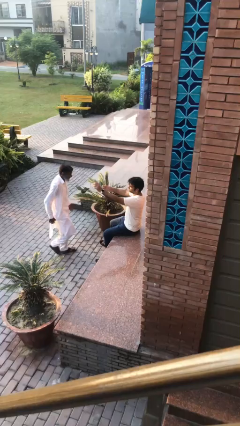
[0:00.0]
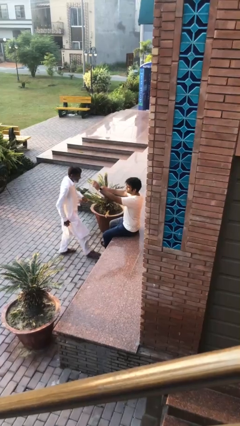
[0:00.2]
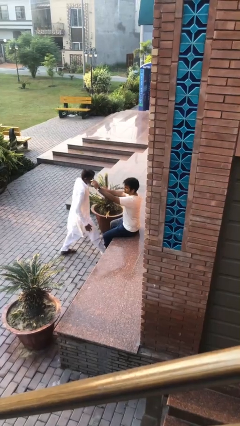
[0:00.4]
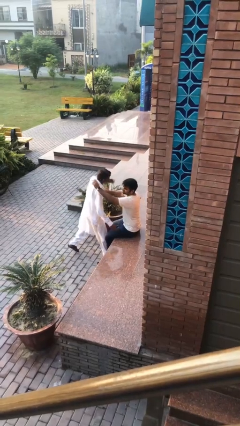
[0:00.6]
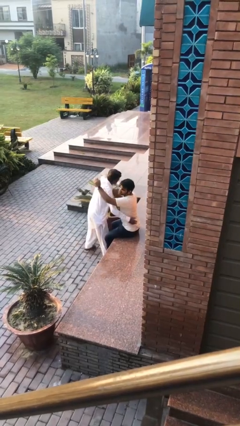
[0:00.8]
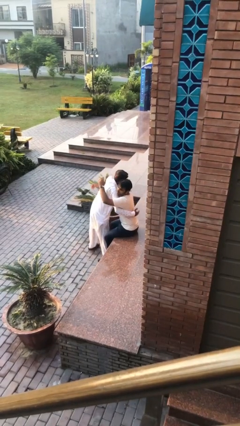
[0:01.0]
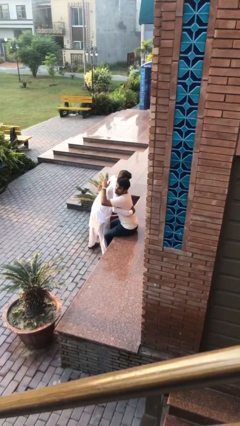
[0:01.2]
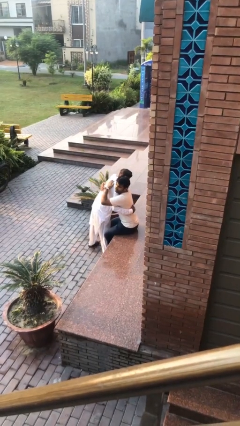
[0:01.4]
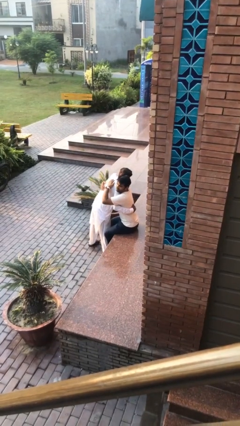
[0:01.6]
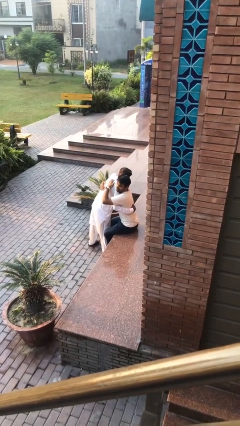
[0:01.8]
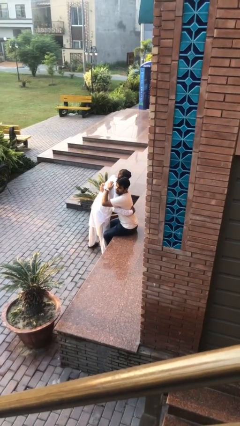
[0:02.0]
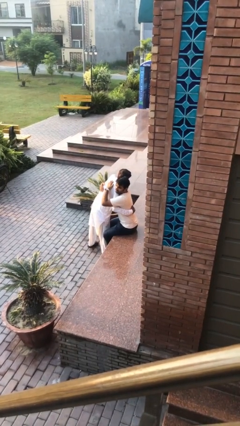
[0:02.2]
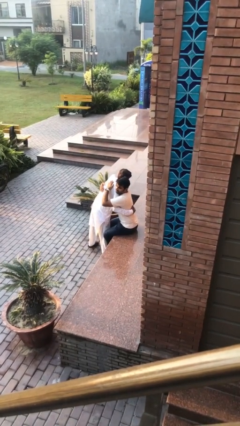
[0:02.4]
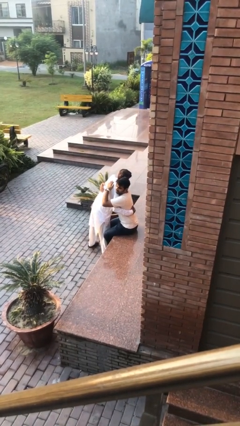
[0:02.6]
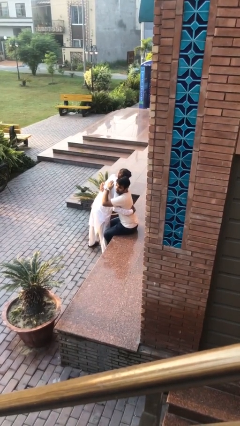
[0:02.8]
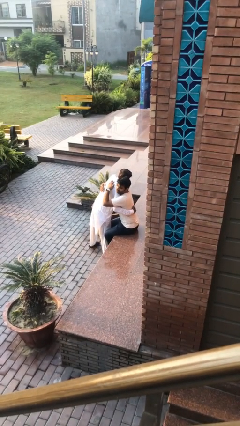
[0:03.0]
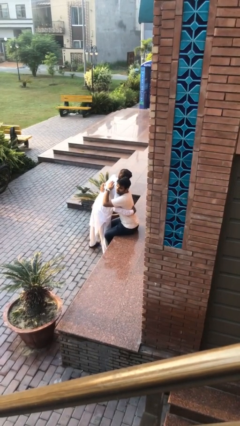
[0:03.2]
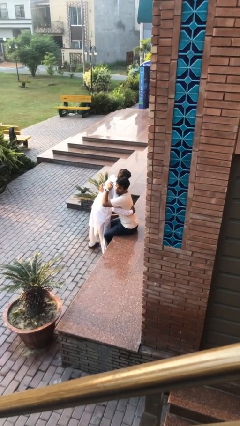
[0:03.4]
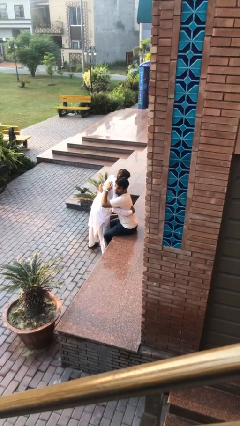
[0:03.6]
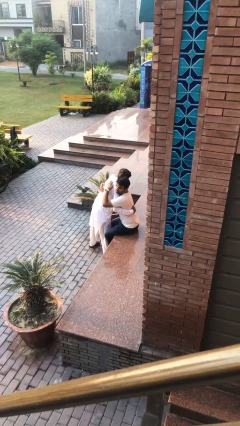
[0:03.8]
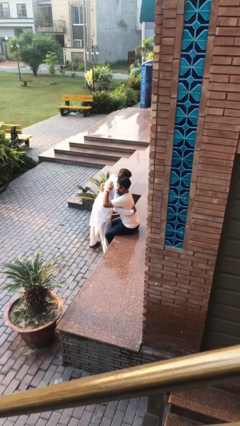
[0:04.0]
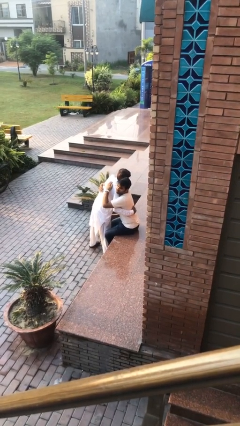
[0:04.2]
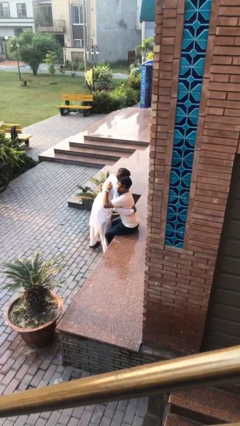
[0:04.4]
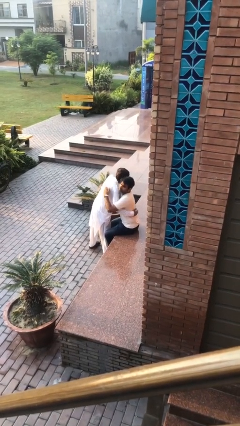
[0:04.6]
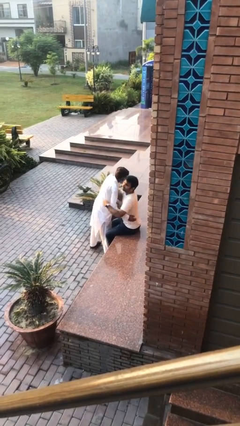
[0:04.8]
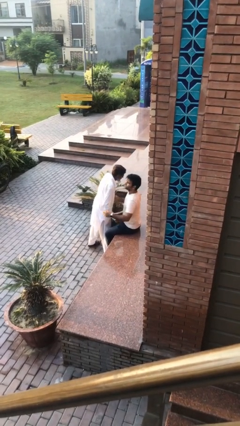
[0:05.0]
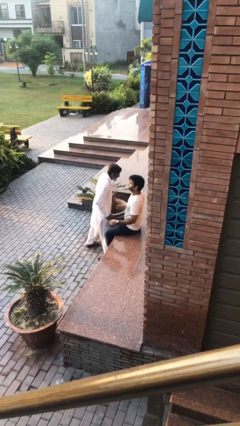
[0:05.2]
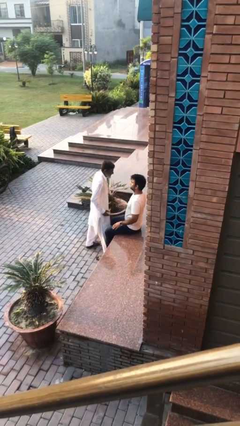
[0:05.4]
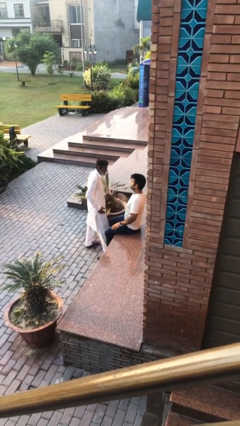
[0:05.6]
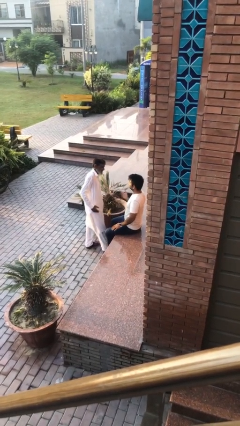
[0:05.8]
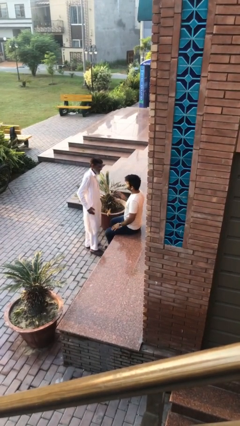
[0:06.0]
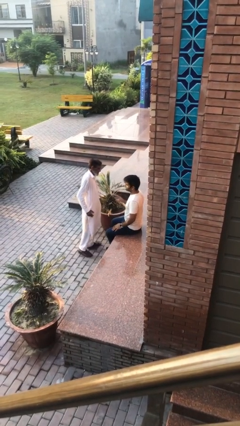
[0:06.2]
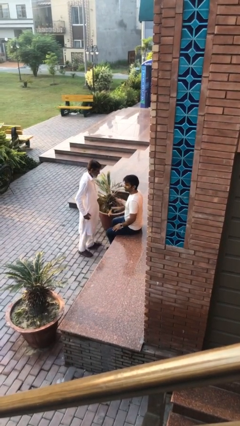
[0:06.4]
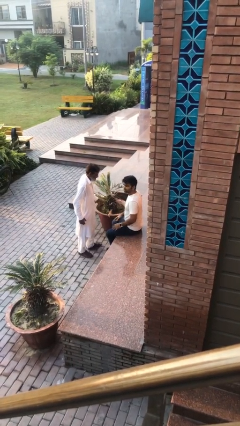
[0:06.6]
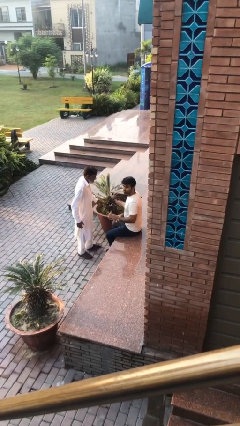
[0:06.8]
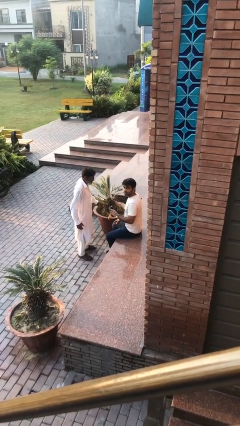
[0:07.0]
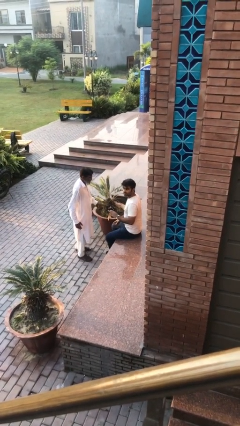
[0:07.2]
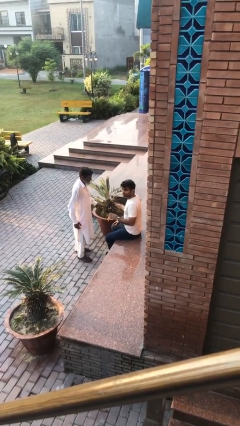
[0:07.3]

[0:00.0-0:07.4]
person embraces person

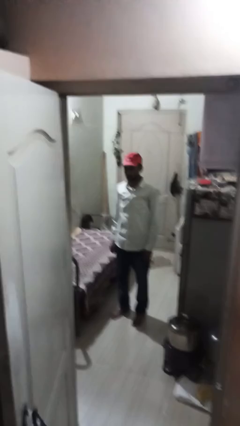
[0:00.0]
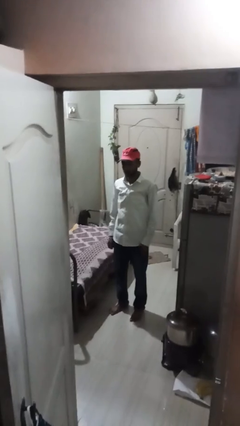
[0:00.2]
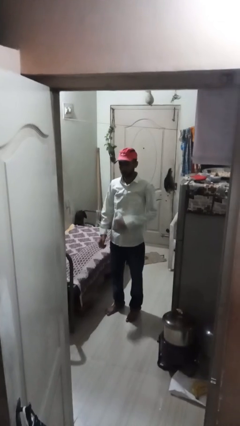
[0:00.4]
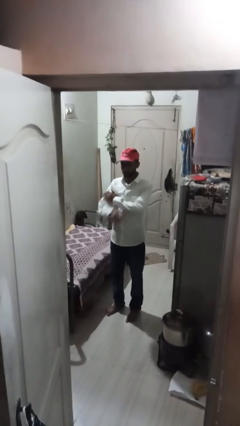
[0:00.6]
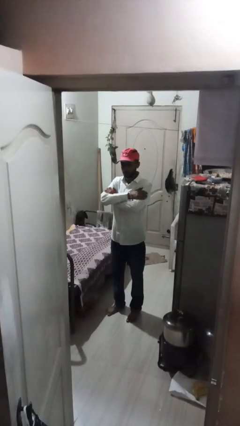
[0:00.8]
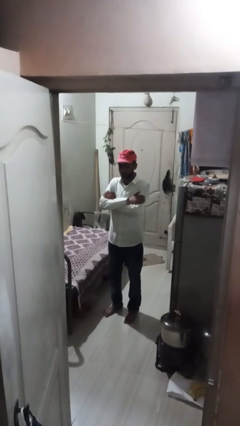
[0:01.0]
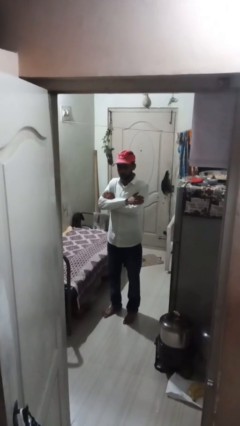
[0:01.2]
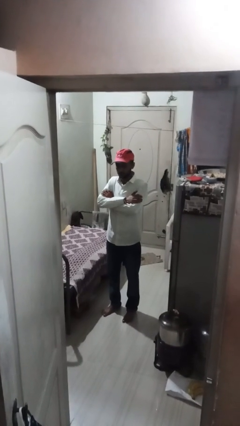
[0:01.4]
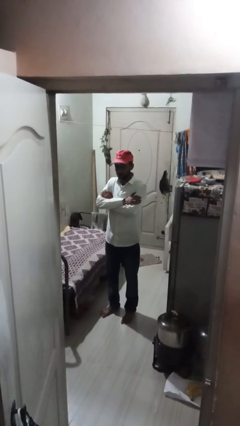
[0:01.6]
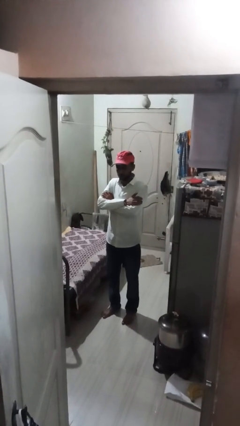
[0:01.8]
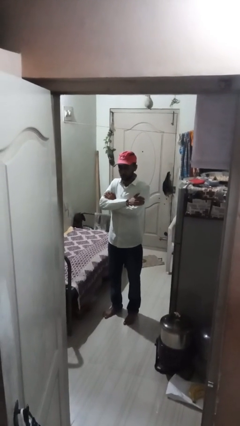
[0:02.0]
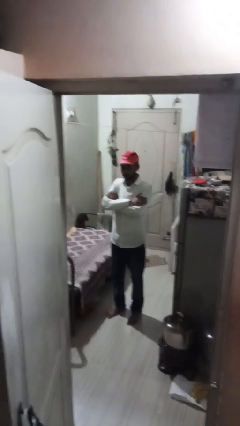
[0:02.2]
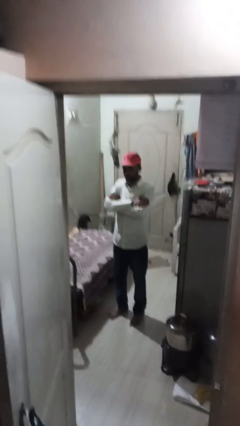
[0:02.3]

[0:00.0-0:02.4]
person crosses arms

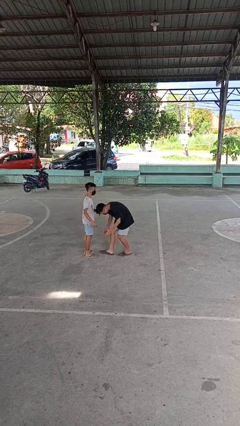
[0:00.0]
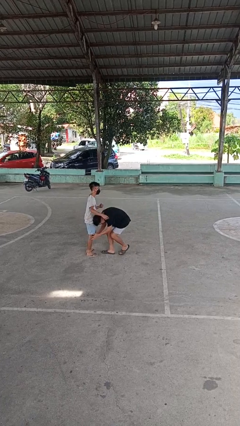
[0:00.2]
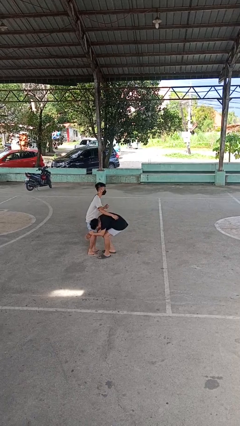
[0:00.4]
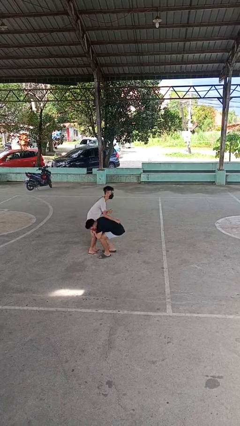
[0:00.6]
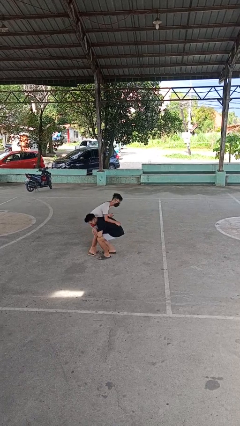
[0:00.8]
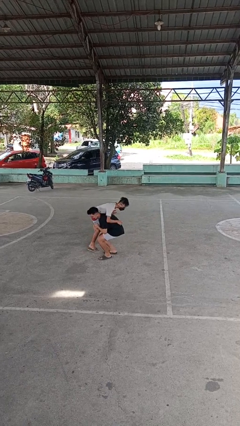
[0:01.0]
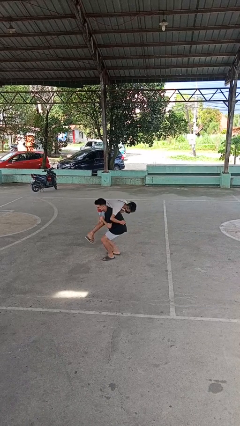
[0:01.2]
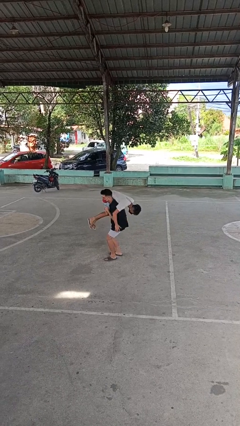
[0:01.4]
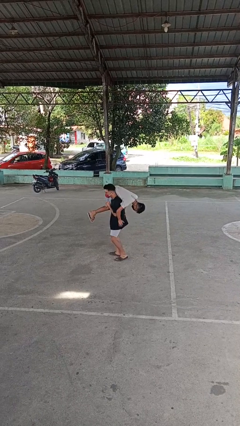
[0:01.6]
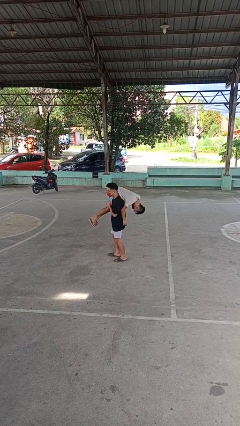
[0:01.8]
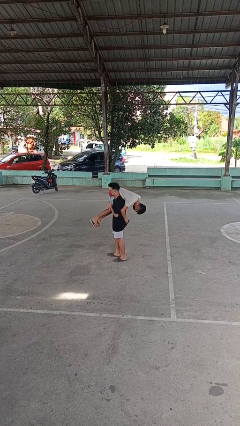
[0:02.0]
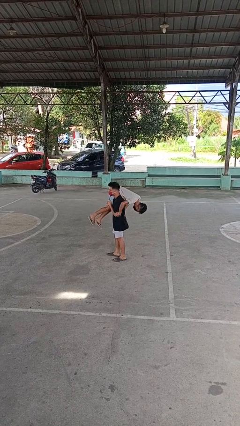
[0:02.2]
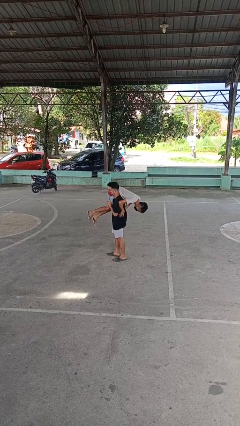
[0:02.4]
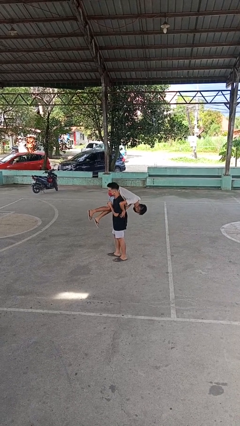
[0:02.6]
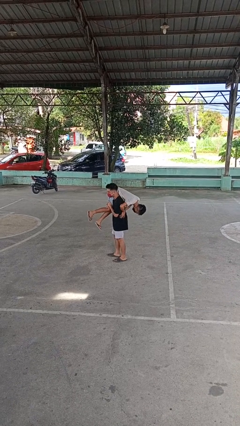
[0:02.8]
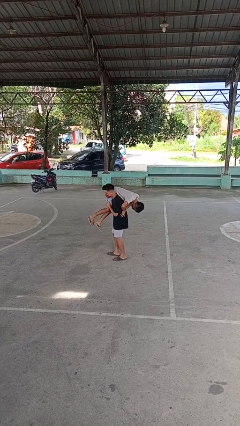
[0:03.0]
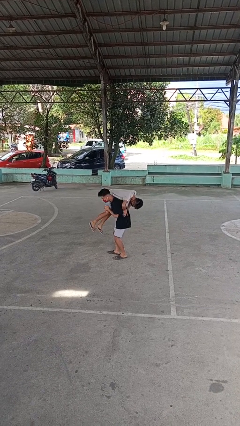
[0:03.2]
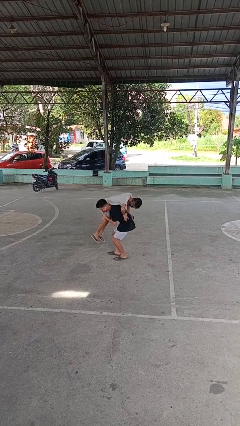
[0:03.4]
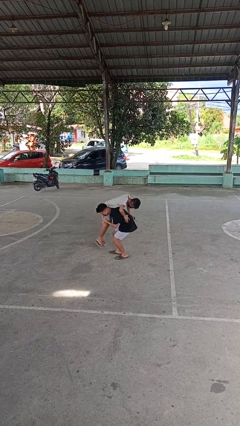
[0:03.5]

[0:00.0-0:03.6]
person carries person over shoulder

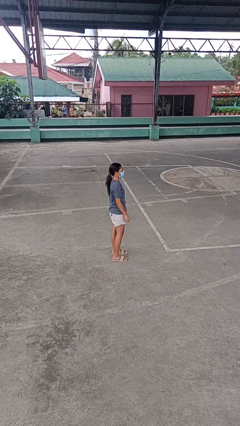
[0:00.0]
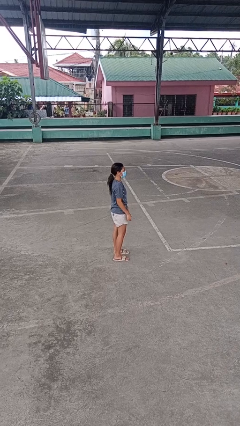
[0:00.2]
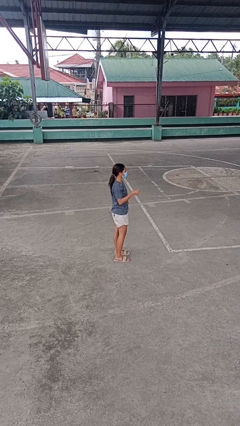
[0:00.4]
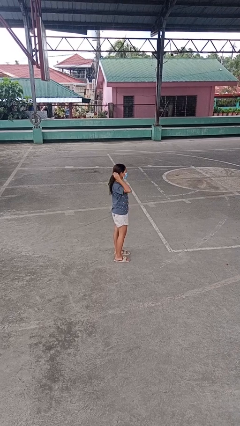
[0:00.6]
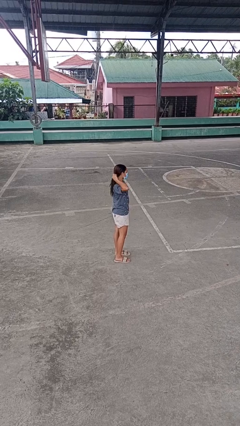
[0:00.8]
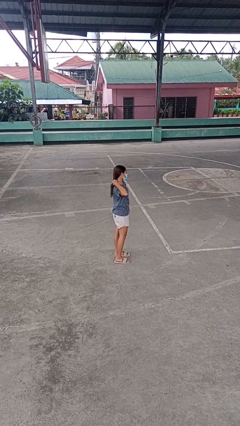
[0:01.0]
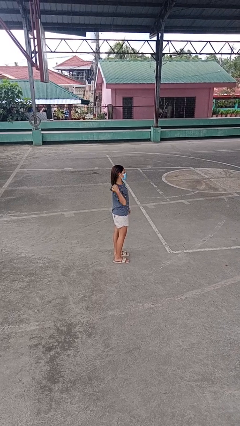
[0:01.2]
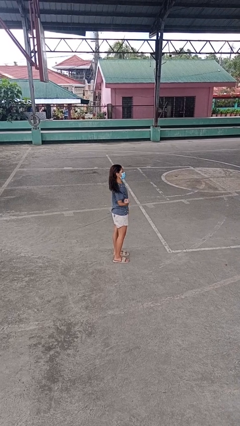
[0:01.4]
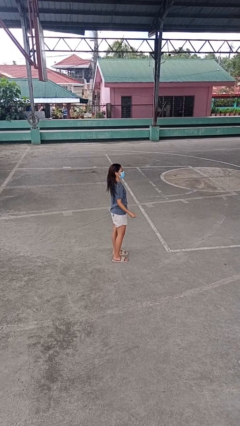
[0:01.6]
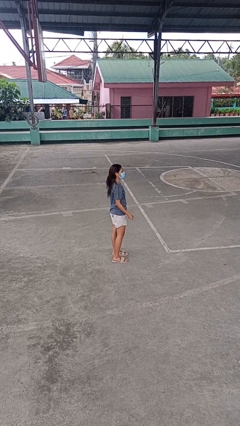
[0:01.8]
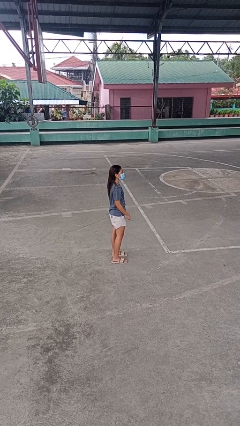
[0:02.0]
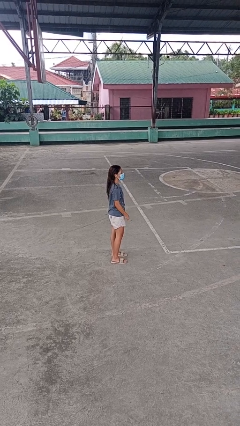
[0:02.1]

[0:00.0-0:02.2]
person takes off hairtie

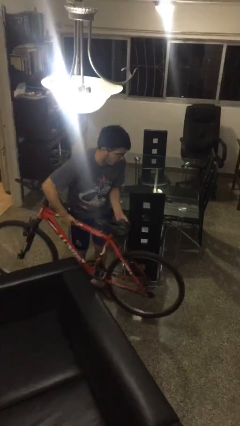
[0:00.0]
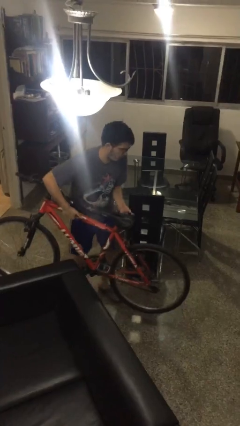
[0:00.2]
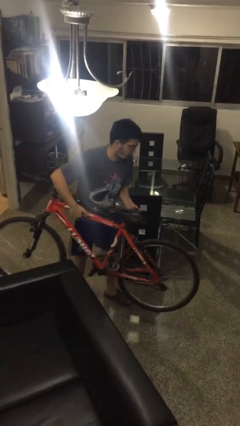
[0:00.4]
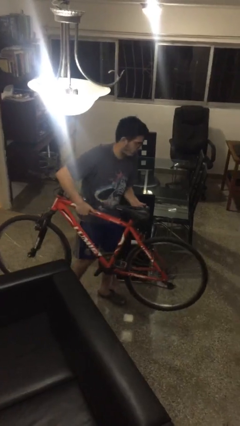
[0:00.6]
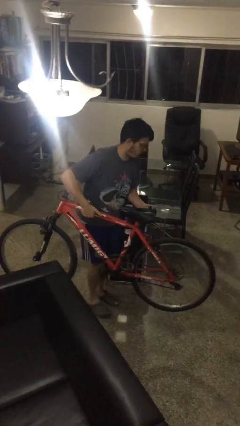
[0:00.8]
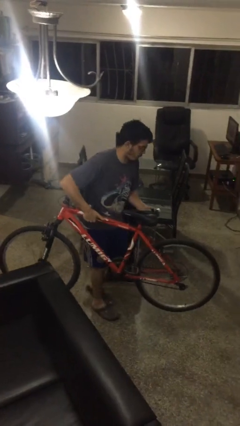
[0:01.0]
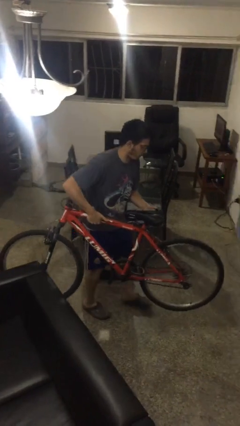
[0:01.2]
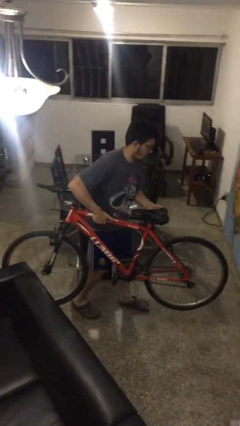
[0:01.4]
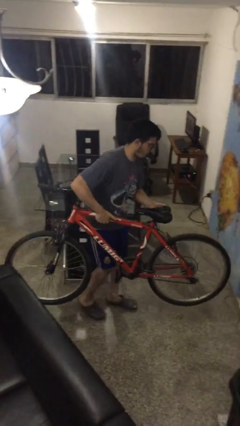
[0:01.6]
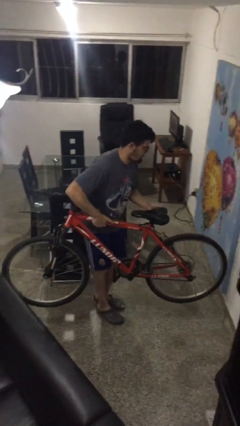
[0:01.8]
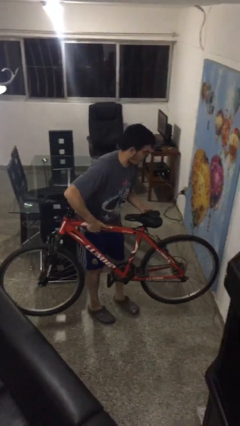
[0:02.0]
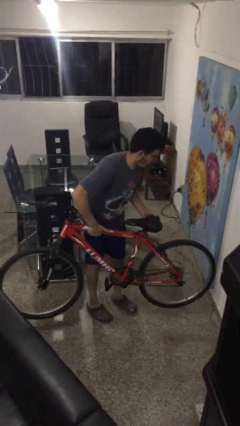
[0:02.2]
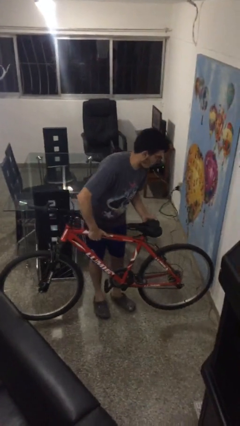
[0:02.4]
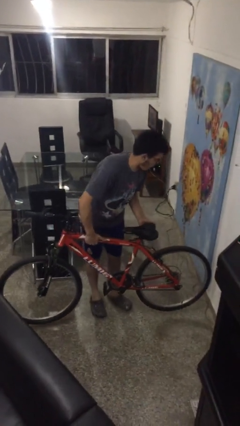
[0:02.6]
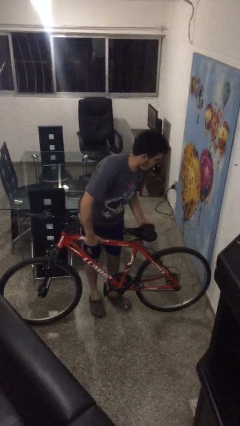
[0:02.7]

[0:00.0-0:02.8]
person carries bicycle
